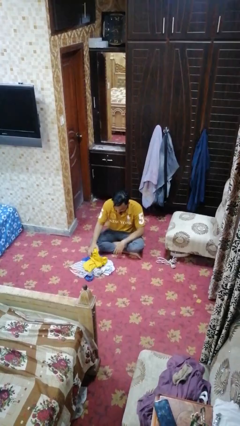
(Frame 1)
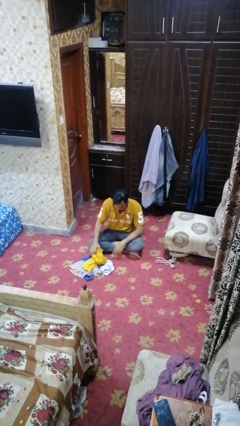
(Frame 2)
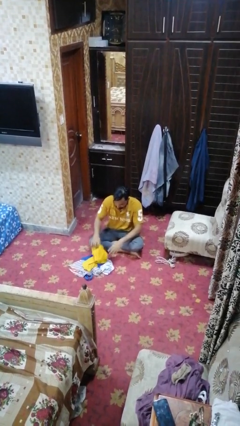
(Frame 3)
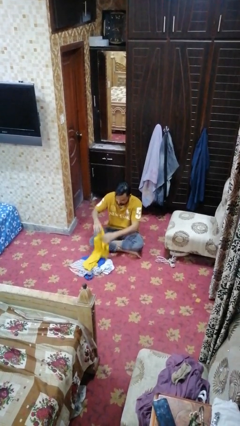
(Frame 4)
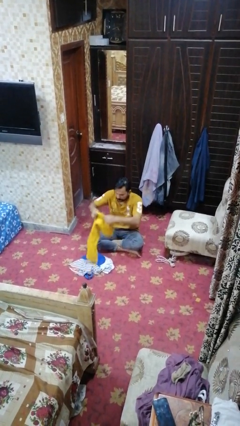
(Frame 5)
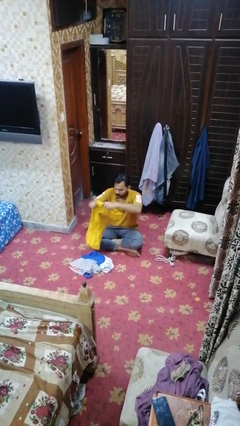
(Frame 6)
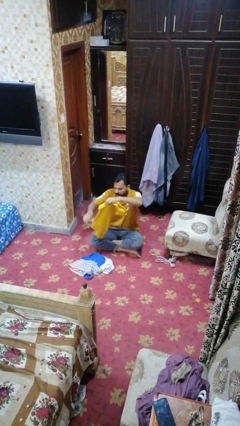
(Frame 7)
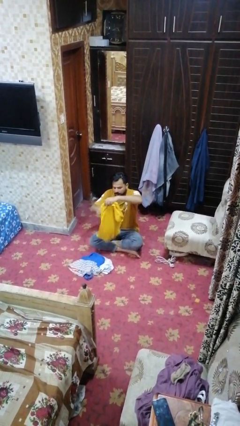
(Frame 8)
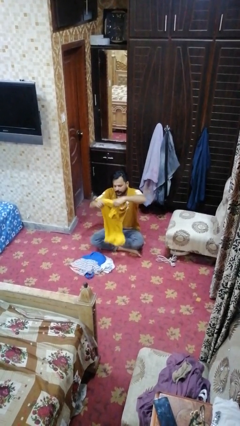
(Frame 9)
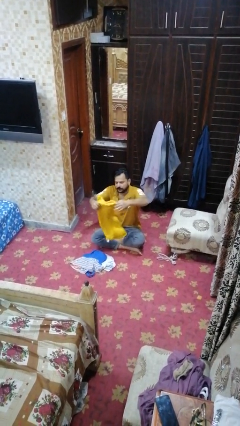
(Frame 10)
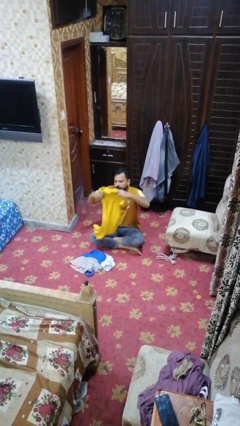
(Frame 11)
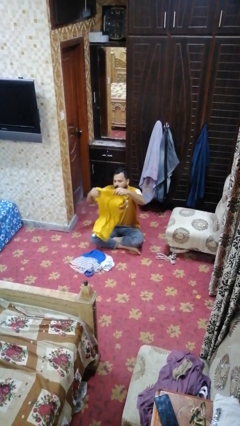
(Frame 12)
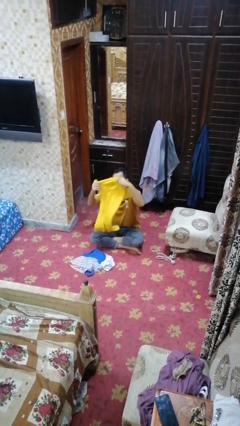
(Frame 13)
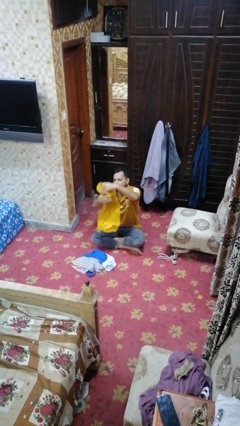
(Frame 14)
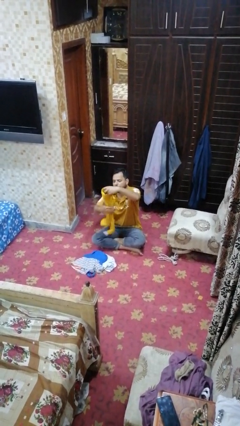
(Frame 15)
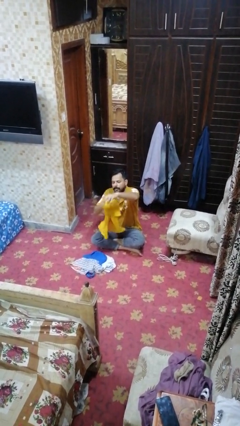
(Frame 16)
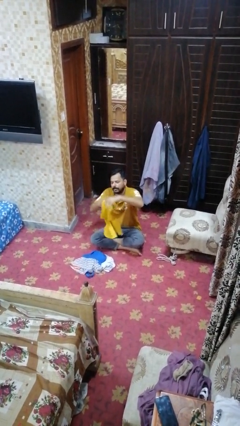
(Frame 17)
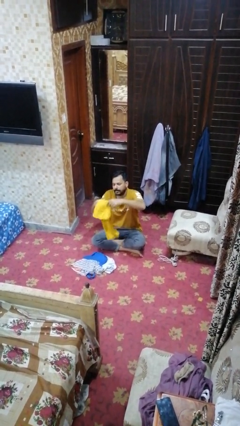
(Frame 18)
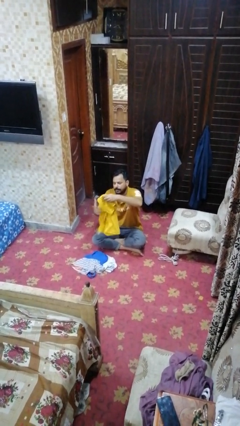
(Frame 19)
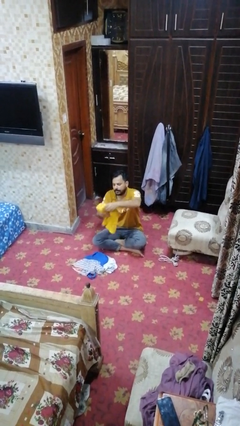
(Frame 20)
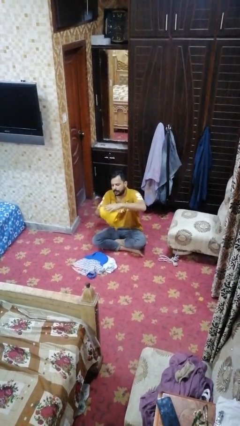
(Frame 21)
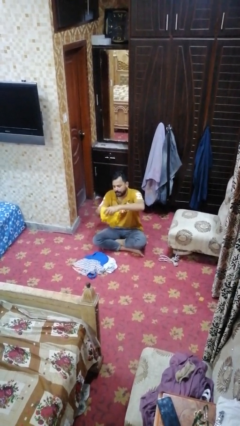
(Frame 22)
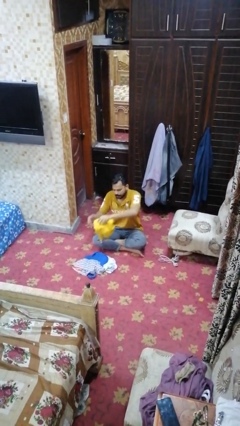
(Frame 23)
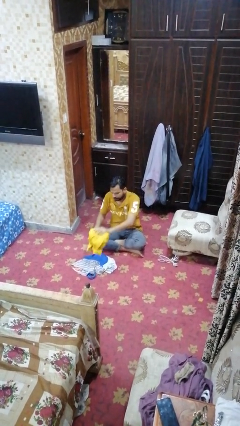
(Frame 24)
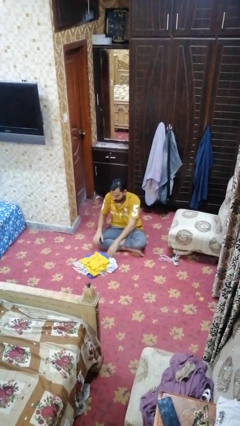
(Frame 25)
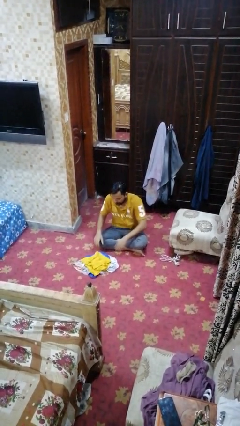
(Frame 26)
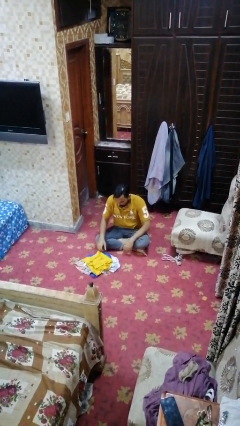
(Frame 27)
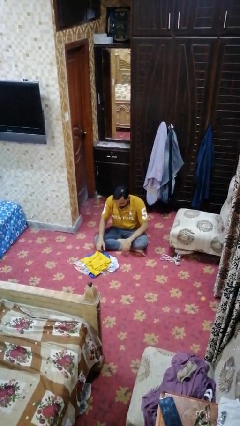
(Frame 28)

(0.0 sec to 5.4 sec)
person folds shirt

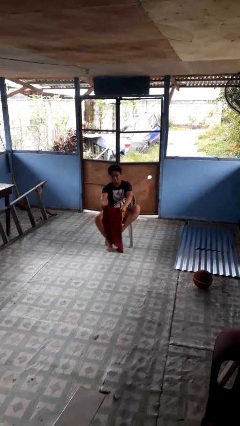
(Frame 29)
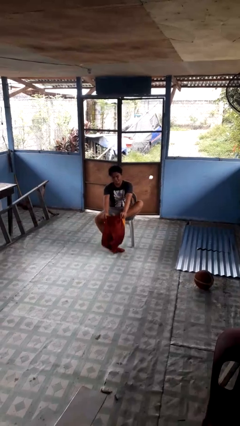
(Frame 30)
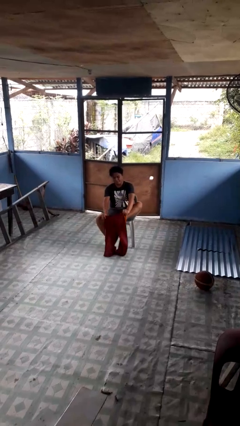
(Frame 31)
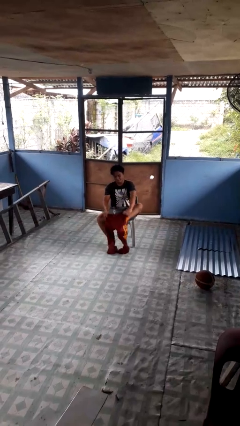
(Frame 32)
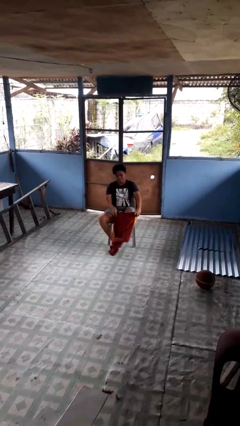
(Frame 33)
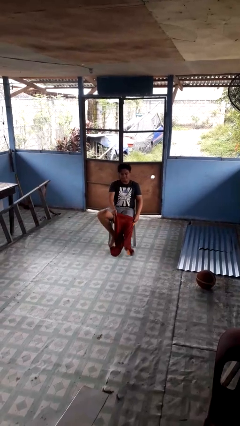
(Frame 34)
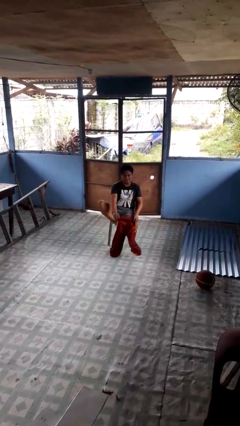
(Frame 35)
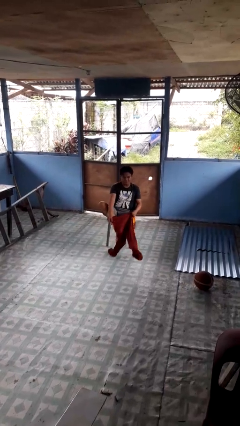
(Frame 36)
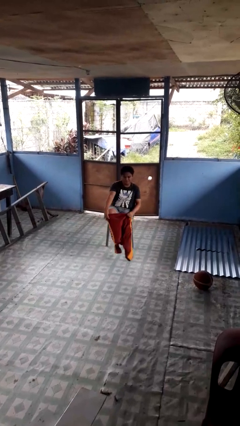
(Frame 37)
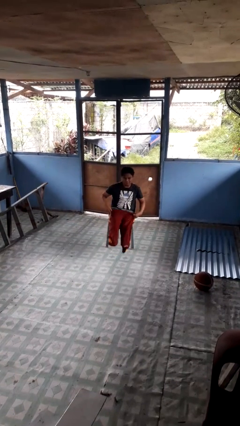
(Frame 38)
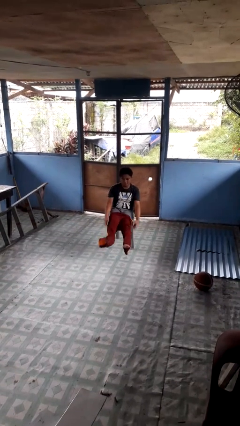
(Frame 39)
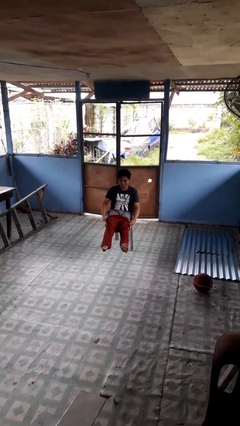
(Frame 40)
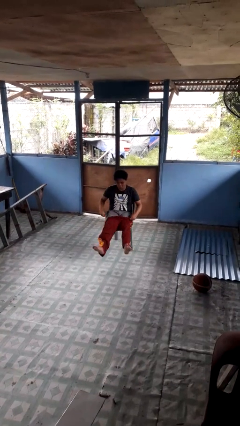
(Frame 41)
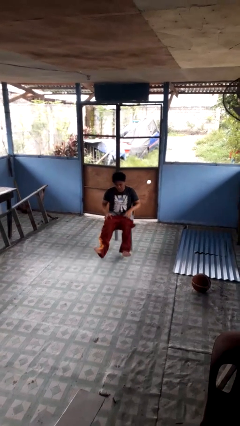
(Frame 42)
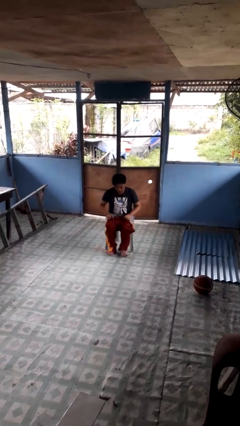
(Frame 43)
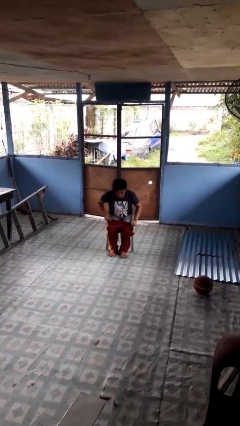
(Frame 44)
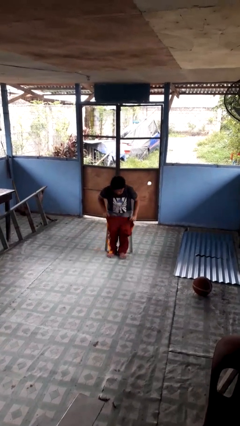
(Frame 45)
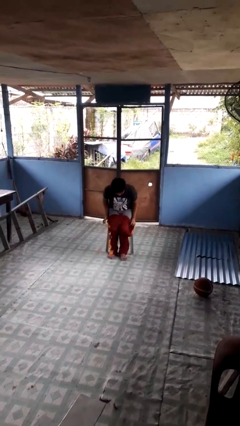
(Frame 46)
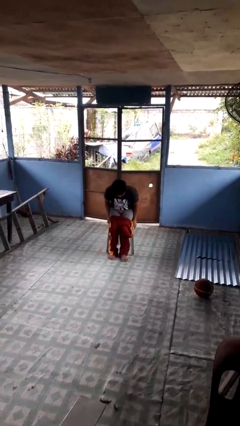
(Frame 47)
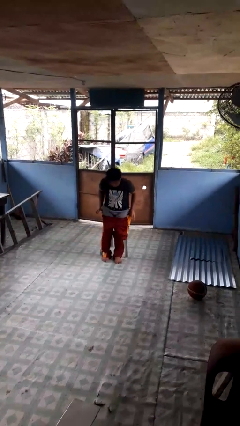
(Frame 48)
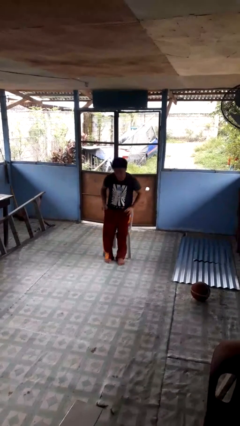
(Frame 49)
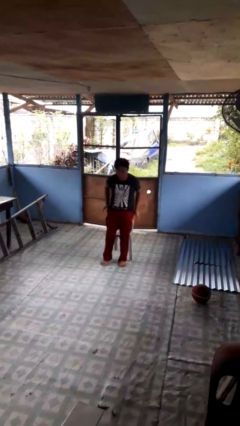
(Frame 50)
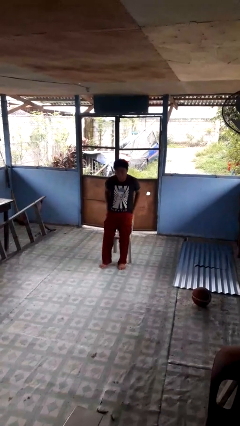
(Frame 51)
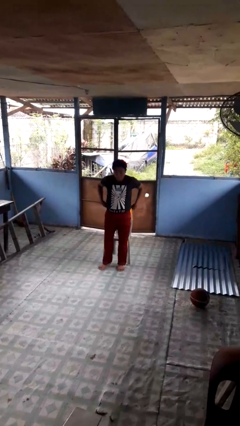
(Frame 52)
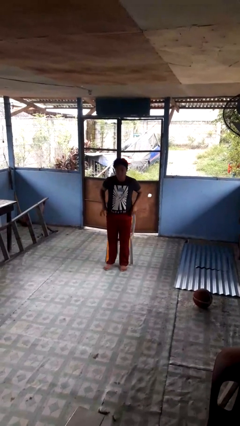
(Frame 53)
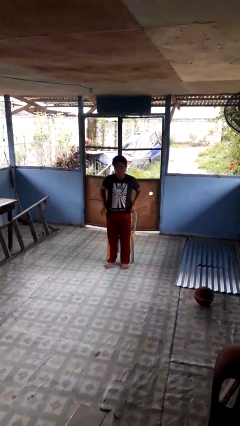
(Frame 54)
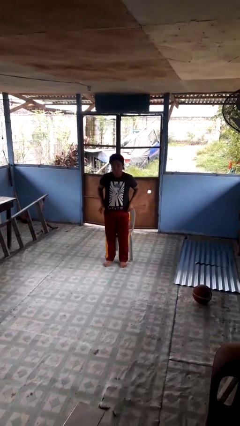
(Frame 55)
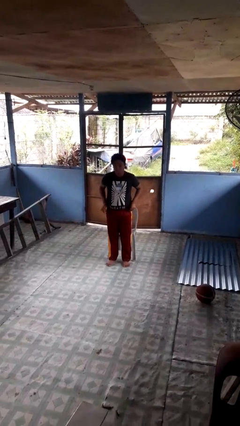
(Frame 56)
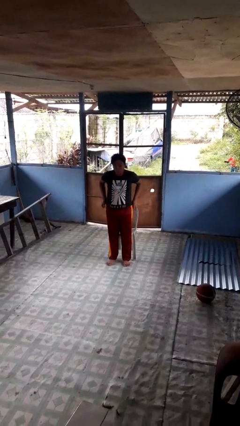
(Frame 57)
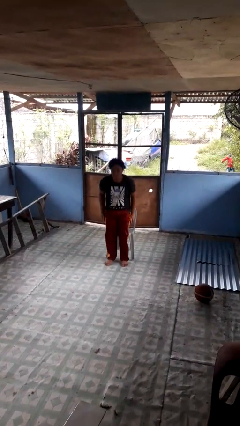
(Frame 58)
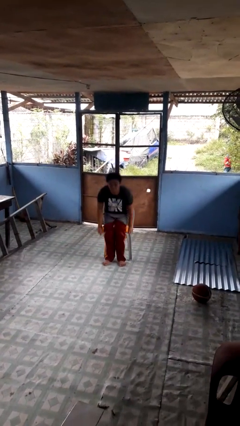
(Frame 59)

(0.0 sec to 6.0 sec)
person puts on pants

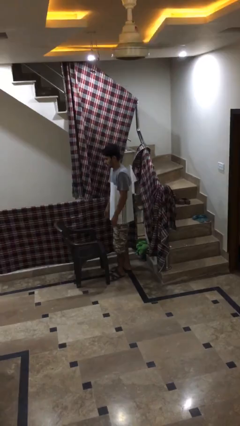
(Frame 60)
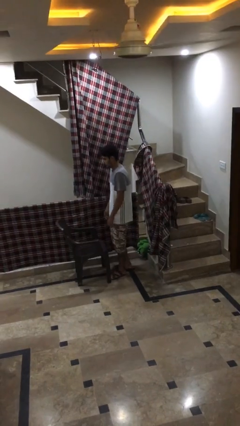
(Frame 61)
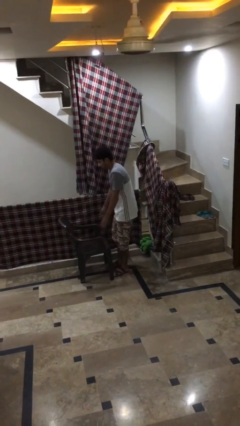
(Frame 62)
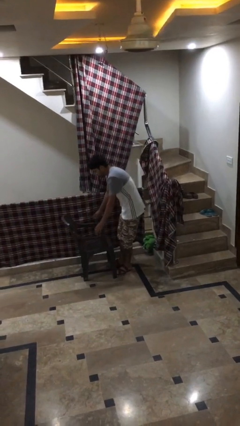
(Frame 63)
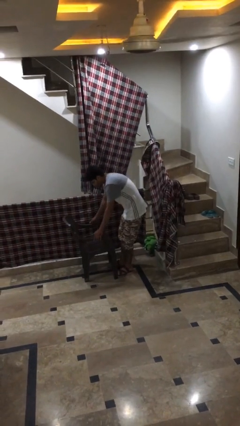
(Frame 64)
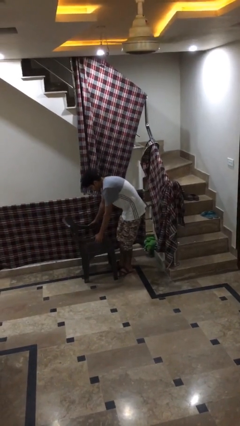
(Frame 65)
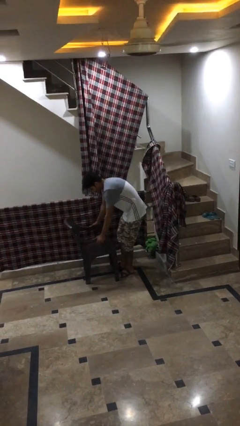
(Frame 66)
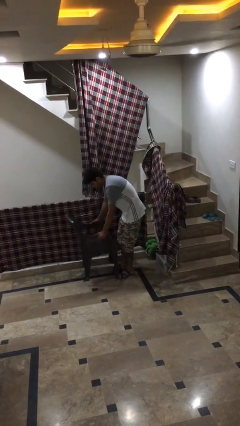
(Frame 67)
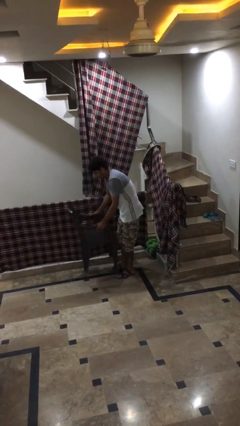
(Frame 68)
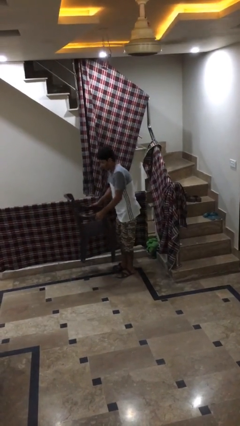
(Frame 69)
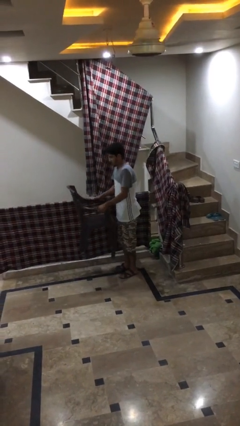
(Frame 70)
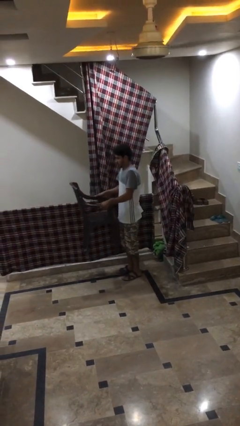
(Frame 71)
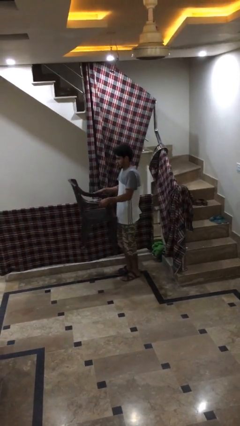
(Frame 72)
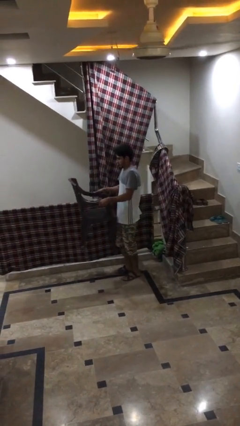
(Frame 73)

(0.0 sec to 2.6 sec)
person picks up object from floor

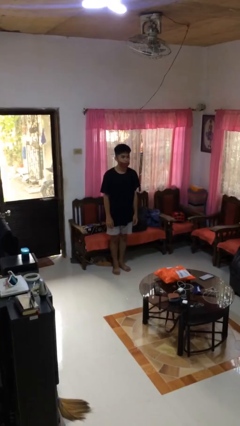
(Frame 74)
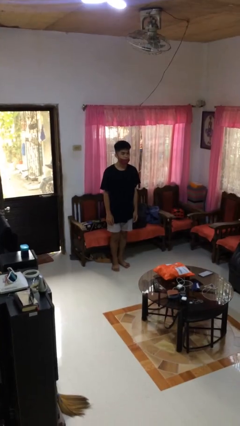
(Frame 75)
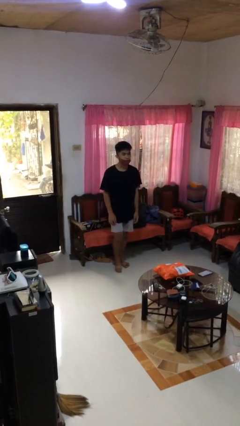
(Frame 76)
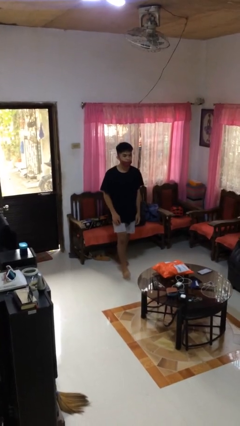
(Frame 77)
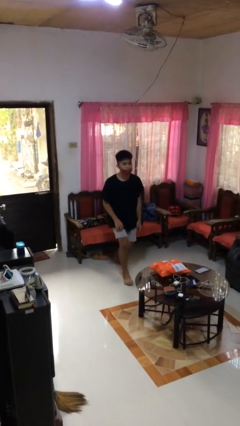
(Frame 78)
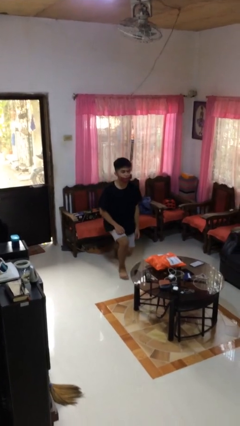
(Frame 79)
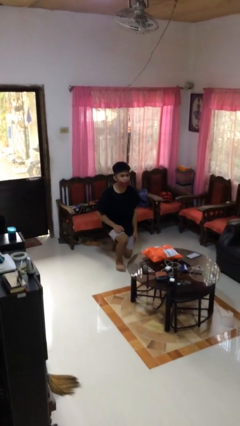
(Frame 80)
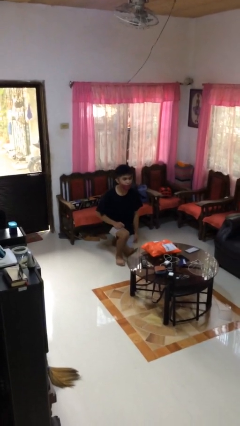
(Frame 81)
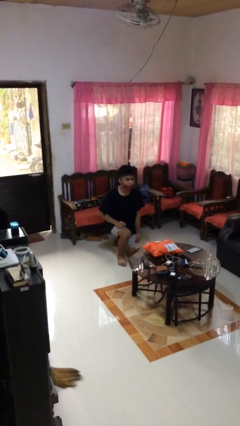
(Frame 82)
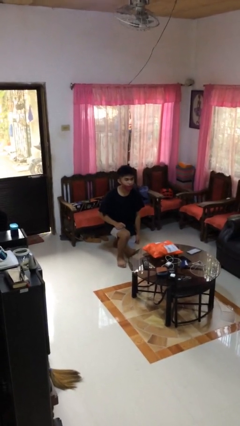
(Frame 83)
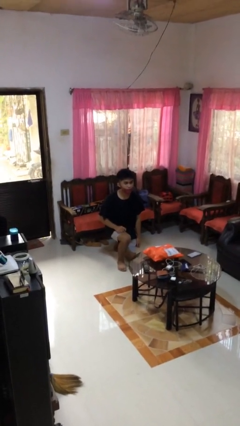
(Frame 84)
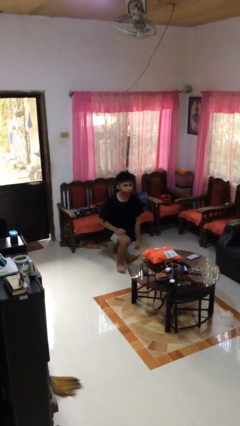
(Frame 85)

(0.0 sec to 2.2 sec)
person kneels

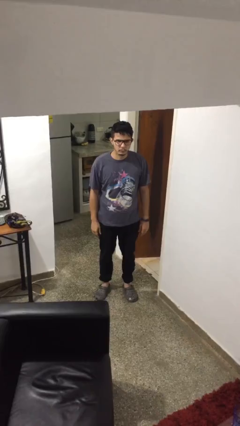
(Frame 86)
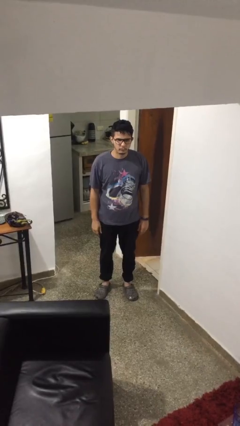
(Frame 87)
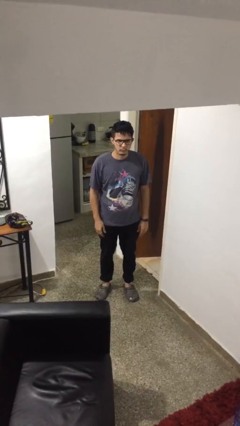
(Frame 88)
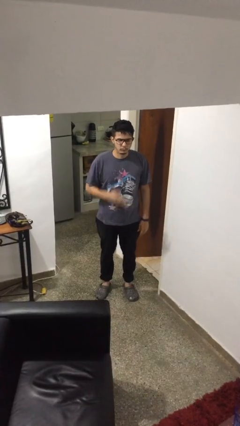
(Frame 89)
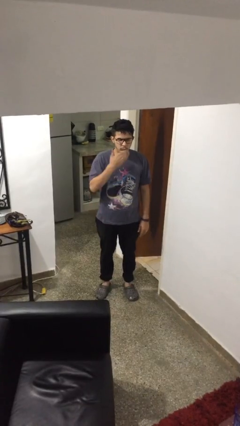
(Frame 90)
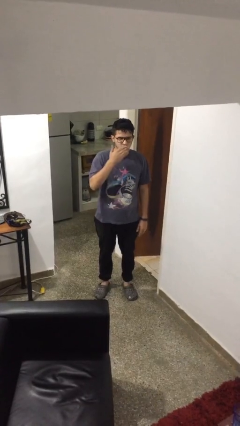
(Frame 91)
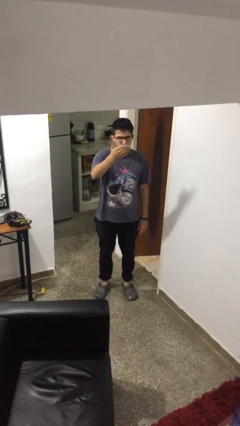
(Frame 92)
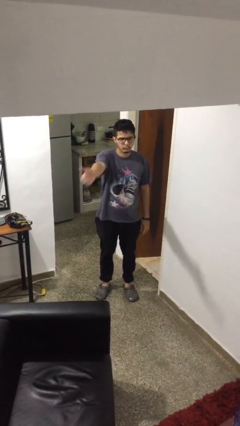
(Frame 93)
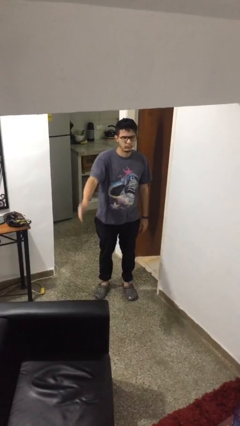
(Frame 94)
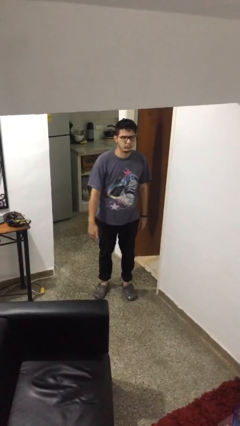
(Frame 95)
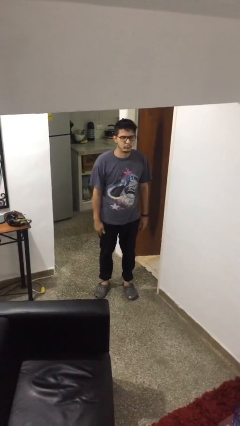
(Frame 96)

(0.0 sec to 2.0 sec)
person gestures blow kiss
